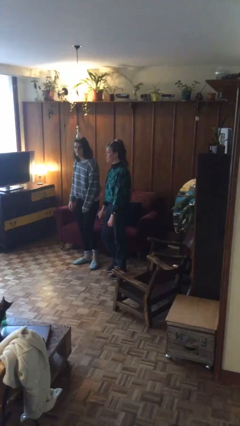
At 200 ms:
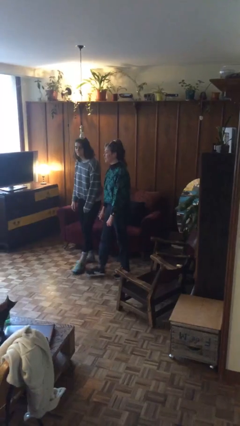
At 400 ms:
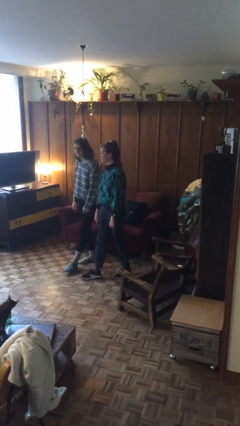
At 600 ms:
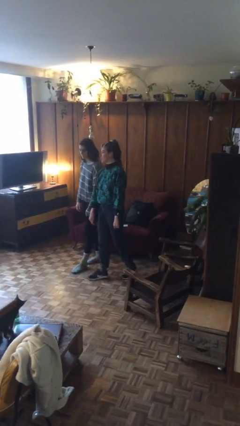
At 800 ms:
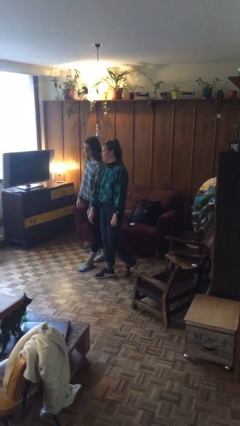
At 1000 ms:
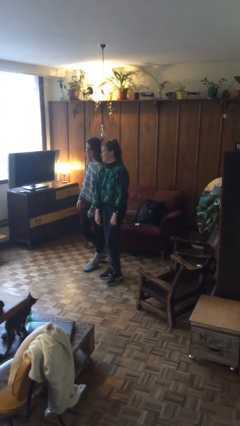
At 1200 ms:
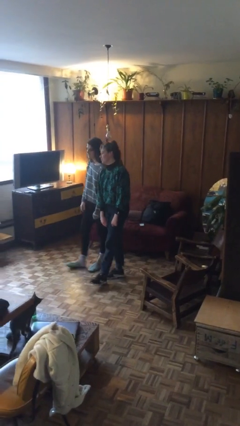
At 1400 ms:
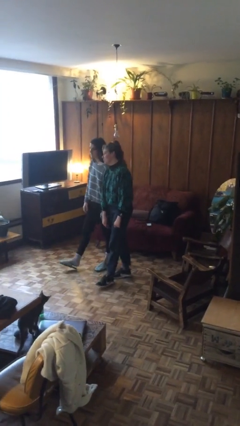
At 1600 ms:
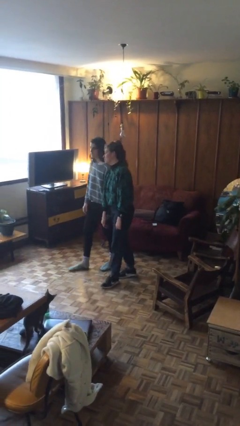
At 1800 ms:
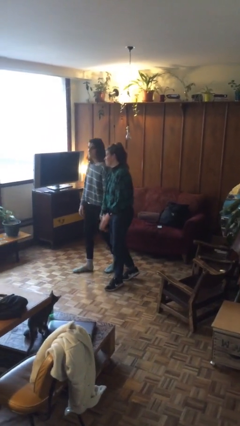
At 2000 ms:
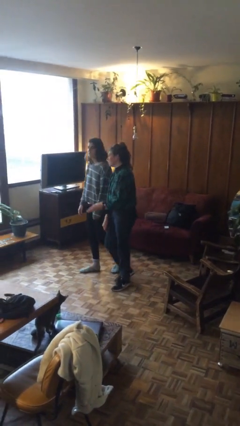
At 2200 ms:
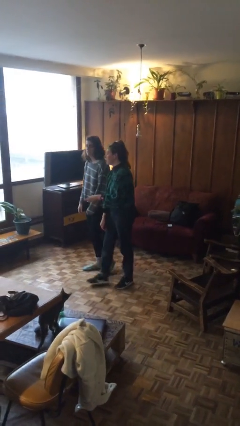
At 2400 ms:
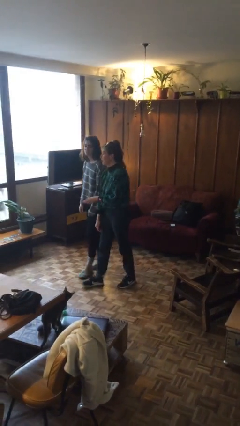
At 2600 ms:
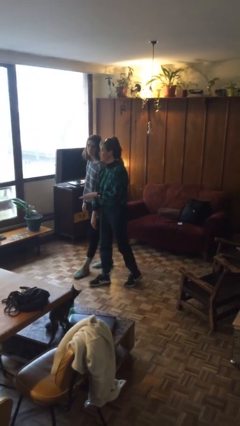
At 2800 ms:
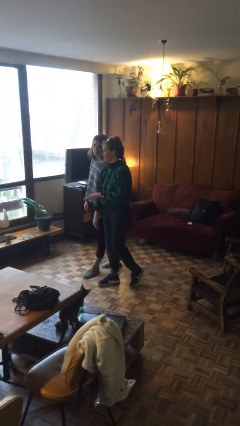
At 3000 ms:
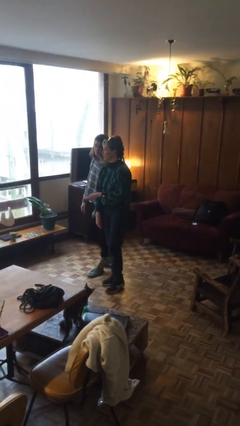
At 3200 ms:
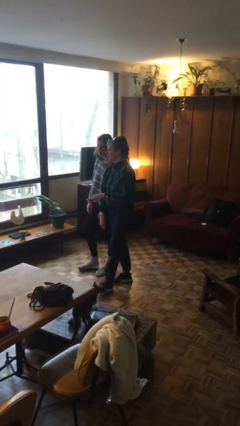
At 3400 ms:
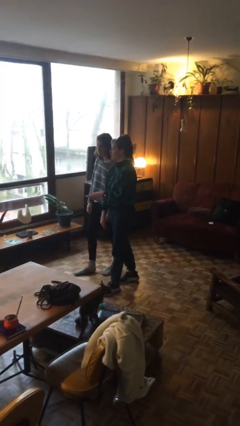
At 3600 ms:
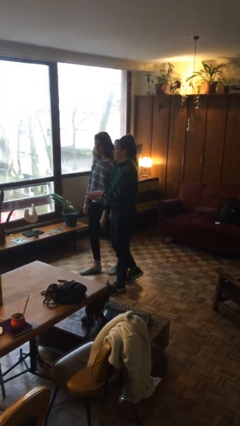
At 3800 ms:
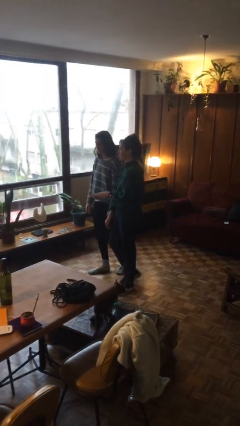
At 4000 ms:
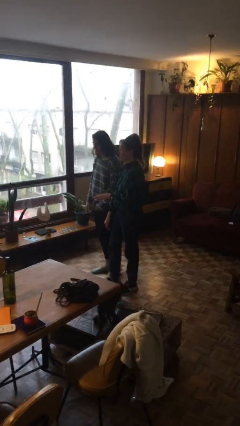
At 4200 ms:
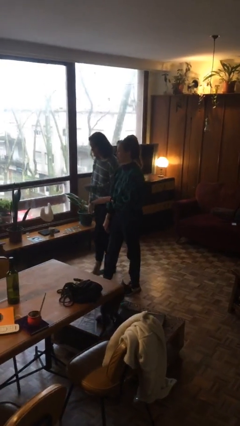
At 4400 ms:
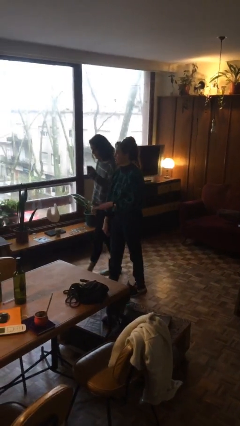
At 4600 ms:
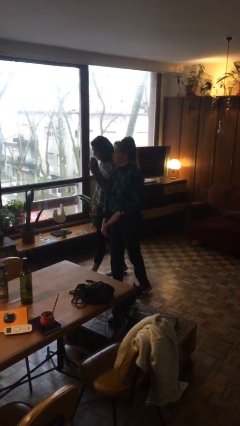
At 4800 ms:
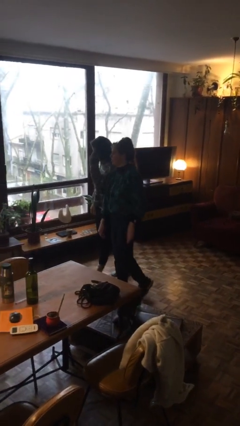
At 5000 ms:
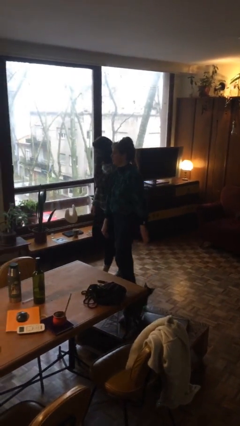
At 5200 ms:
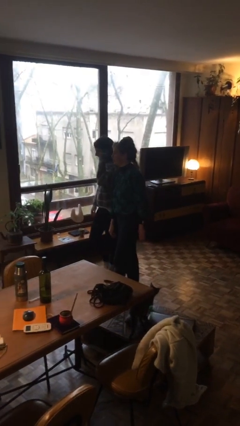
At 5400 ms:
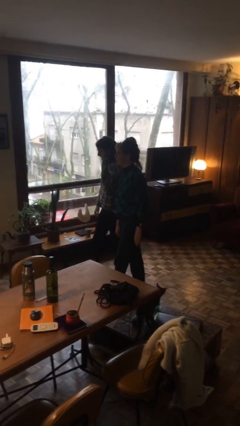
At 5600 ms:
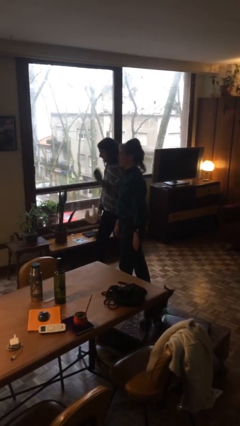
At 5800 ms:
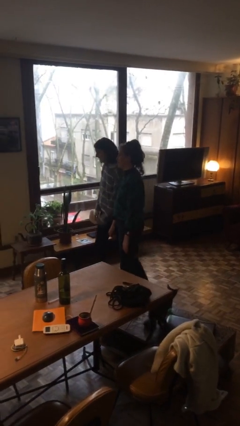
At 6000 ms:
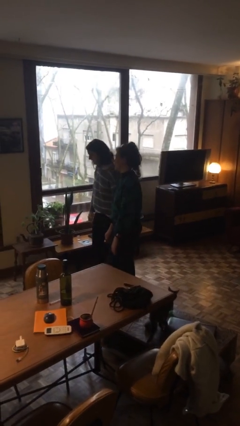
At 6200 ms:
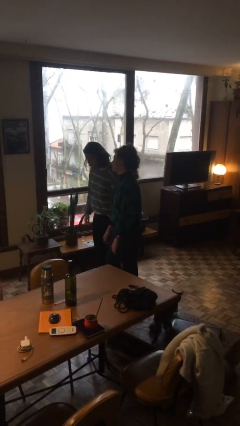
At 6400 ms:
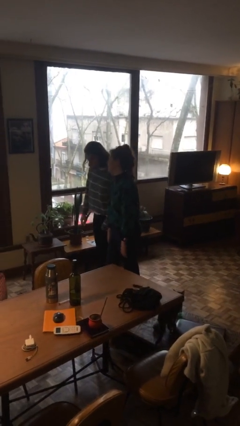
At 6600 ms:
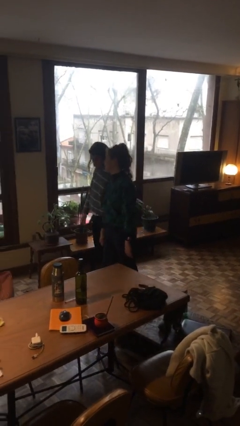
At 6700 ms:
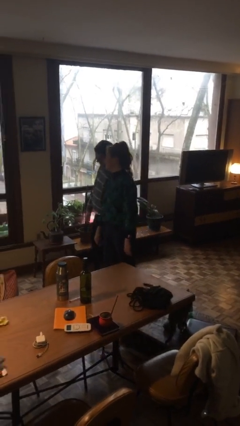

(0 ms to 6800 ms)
person talks to person

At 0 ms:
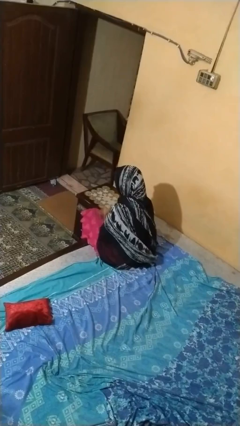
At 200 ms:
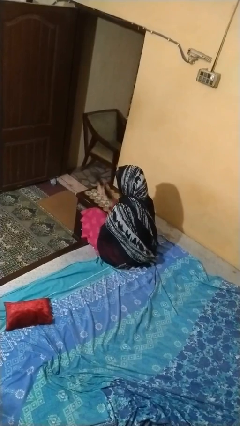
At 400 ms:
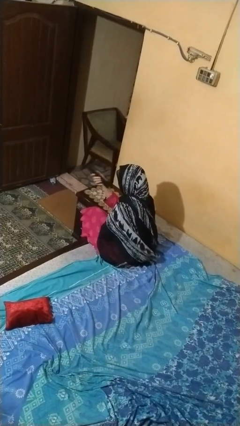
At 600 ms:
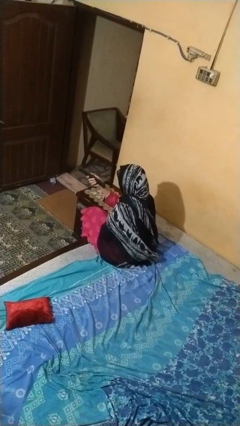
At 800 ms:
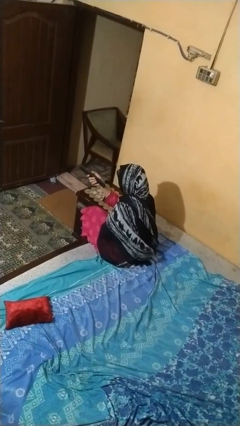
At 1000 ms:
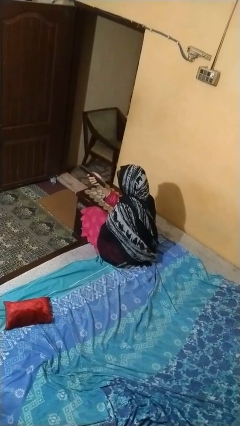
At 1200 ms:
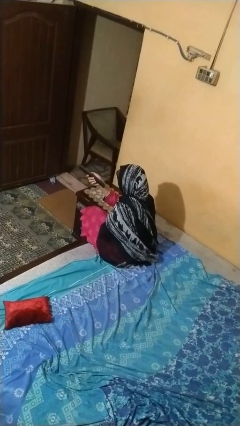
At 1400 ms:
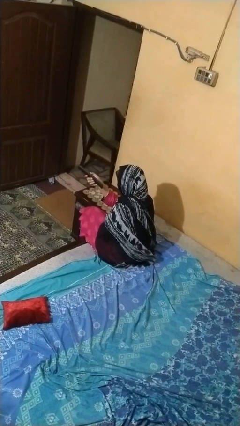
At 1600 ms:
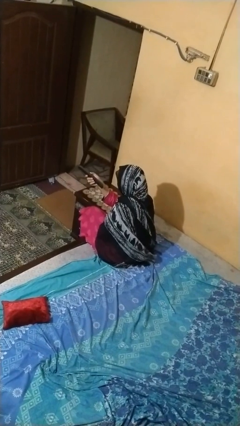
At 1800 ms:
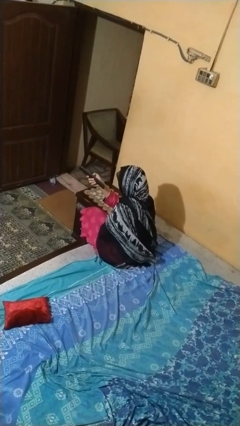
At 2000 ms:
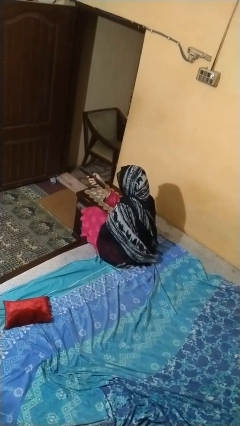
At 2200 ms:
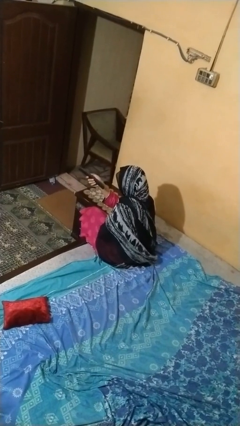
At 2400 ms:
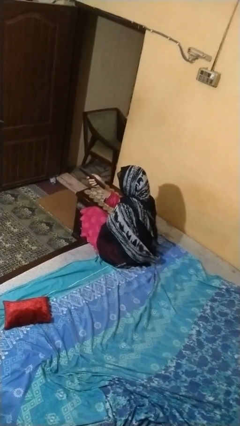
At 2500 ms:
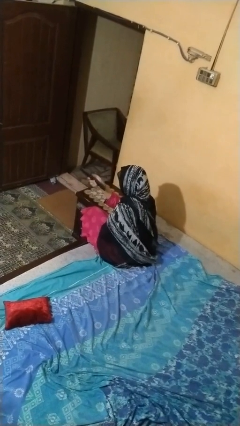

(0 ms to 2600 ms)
person uses television remote

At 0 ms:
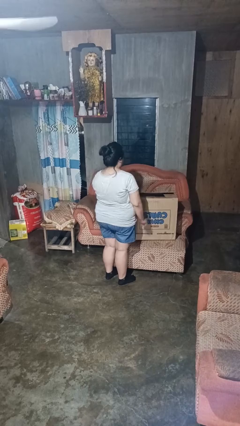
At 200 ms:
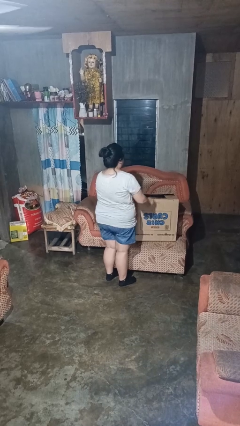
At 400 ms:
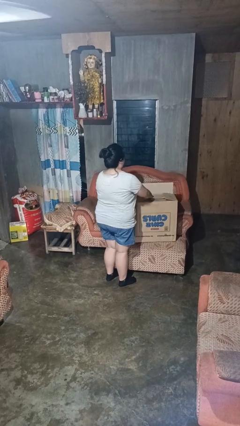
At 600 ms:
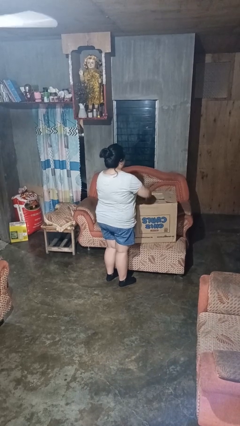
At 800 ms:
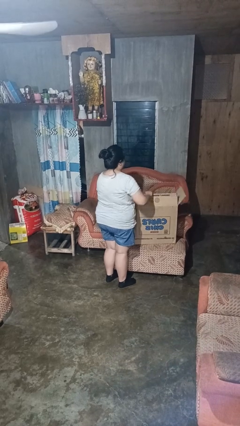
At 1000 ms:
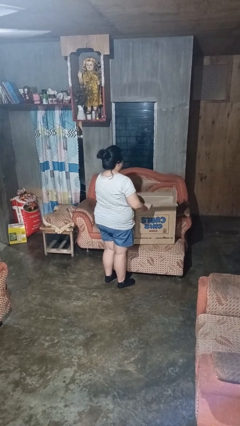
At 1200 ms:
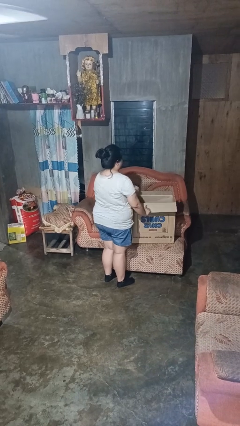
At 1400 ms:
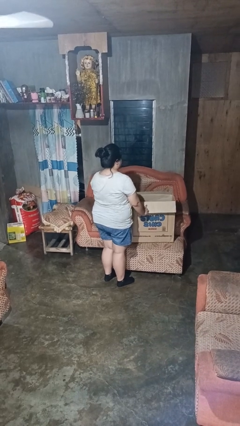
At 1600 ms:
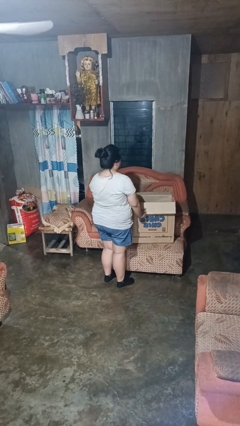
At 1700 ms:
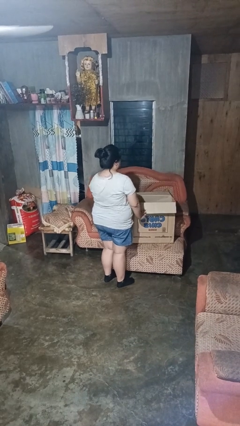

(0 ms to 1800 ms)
person opens box

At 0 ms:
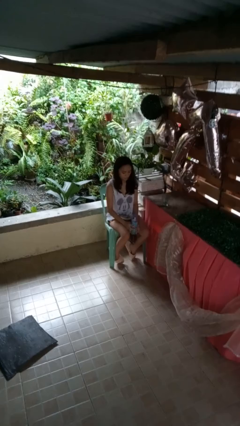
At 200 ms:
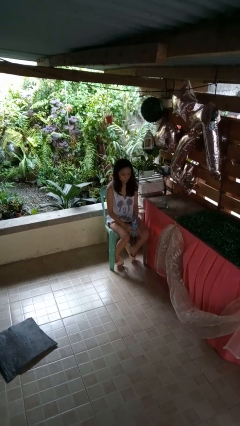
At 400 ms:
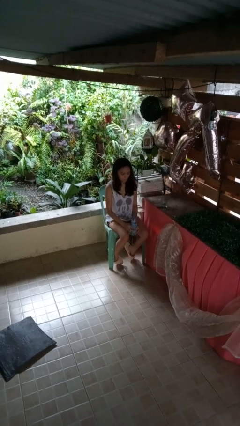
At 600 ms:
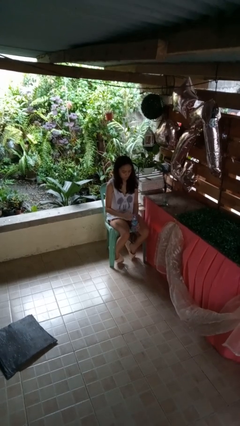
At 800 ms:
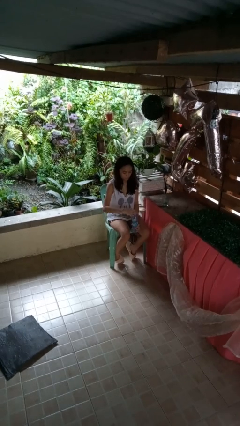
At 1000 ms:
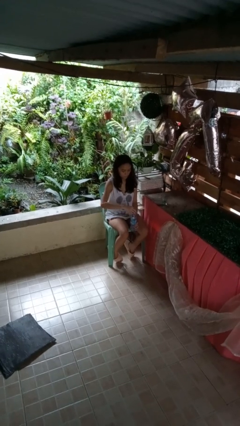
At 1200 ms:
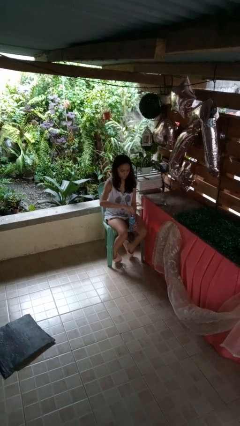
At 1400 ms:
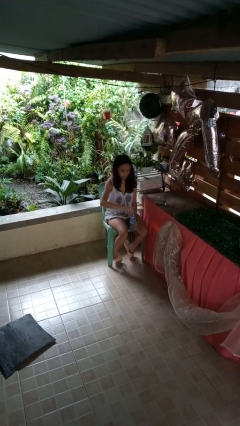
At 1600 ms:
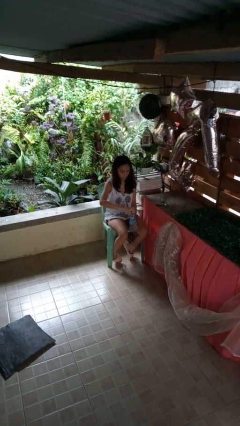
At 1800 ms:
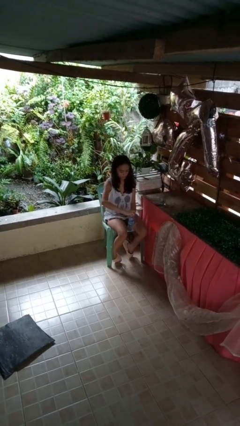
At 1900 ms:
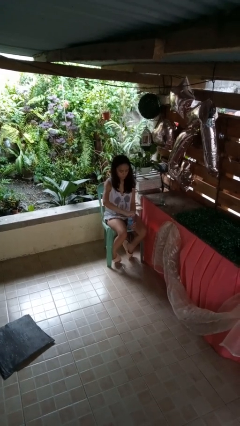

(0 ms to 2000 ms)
person screws lid to bottle

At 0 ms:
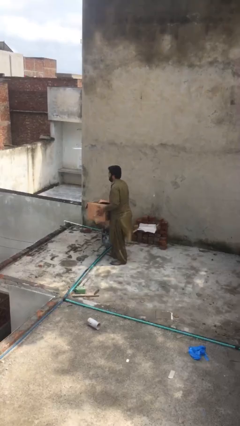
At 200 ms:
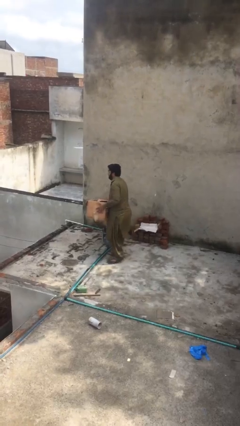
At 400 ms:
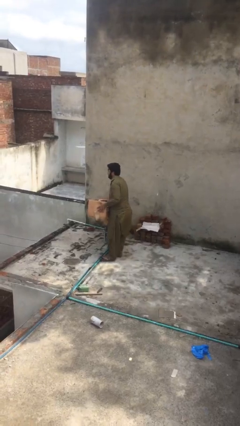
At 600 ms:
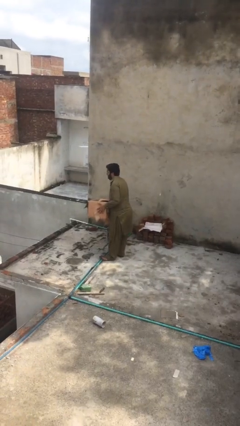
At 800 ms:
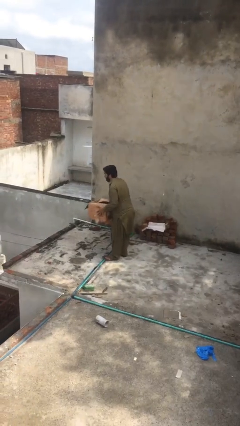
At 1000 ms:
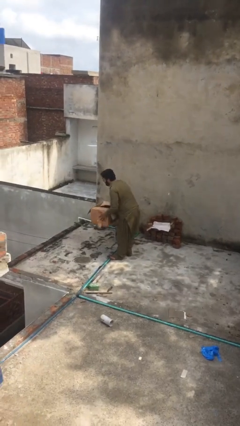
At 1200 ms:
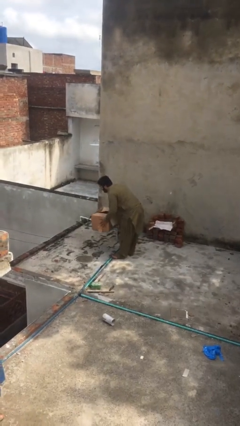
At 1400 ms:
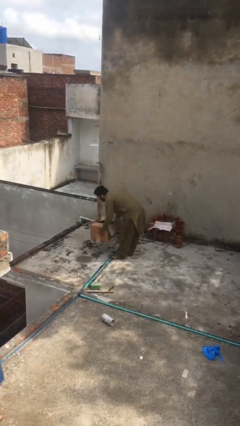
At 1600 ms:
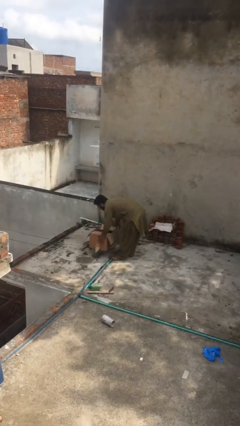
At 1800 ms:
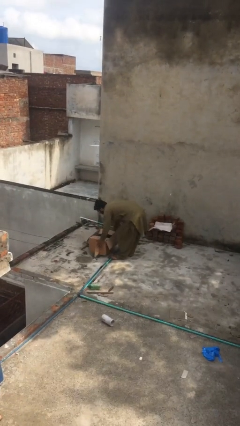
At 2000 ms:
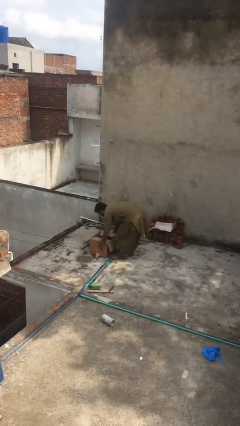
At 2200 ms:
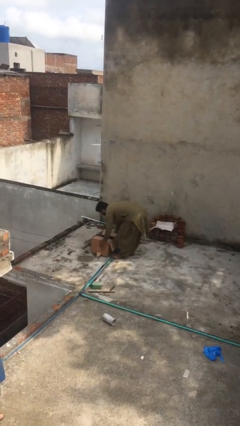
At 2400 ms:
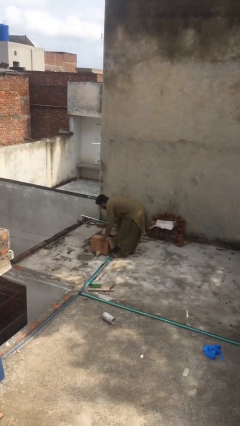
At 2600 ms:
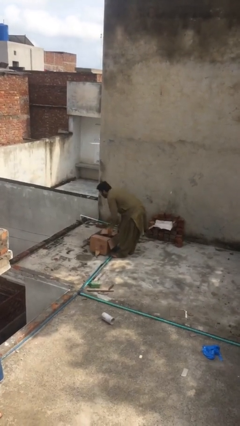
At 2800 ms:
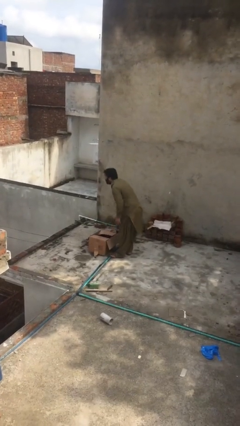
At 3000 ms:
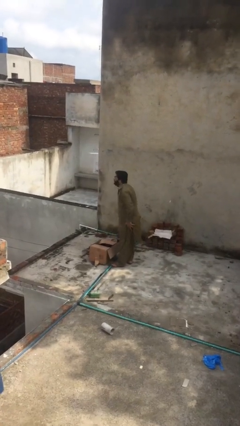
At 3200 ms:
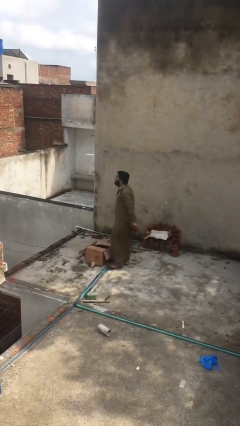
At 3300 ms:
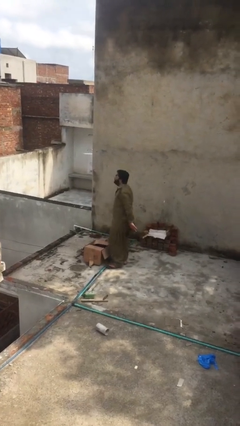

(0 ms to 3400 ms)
person puts down object on floor

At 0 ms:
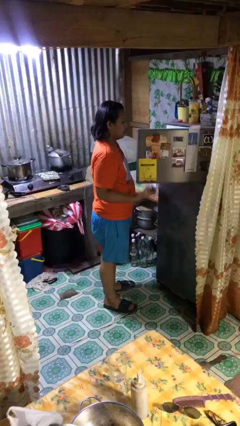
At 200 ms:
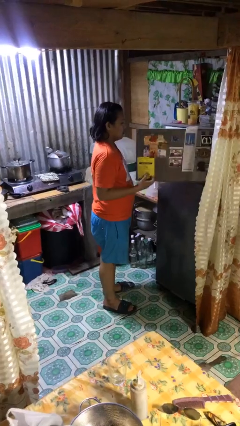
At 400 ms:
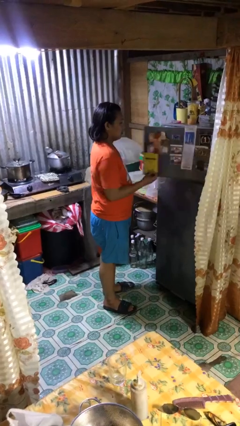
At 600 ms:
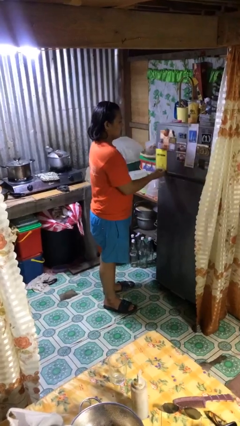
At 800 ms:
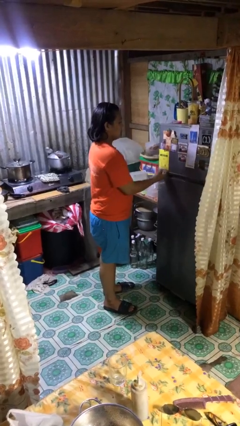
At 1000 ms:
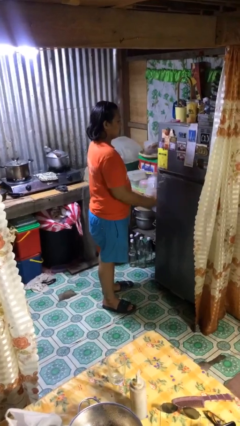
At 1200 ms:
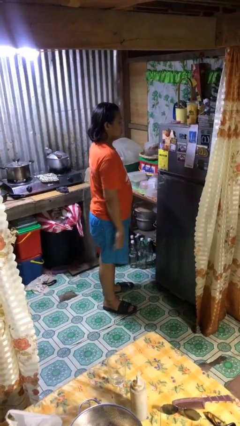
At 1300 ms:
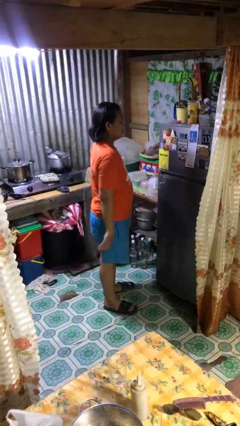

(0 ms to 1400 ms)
person closes refrigerator
